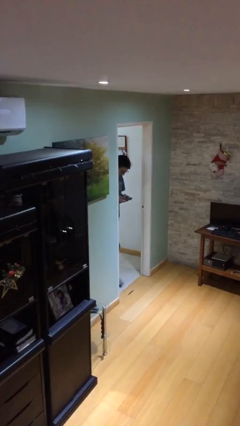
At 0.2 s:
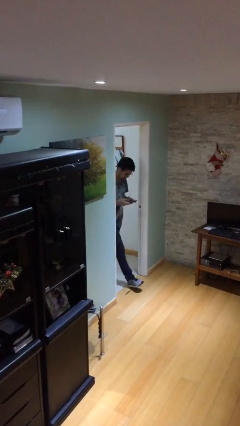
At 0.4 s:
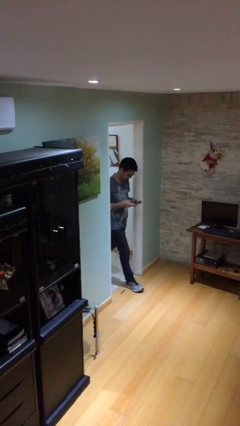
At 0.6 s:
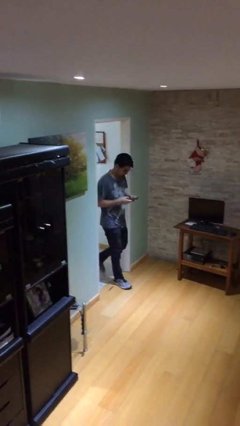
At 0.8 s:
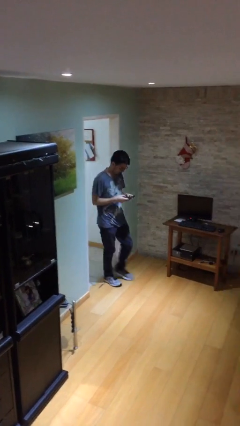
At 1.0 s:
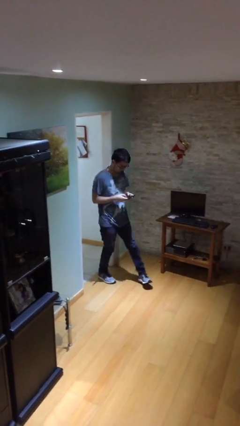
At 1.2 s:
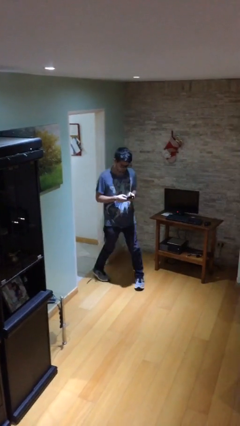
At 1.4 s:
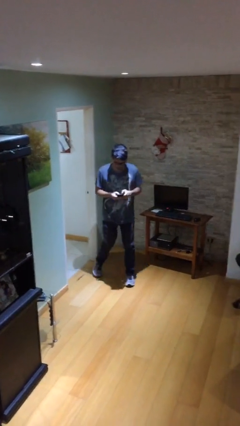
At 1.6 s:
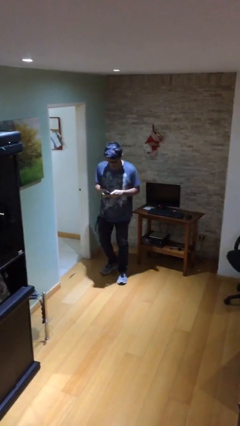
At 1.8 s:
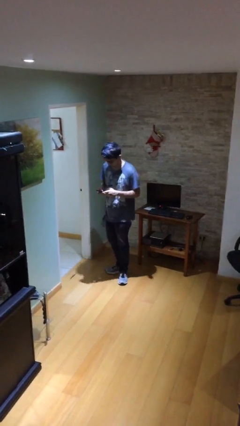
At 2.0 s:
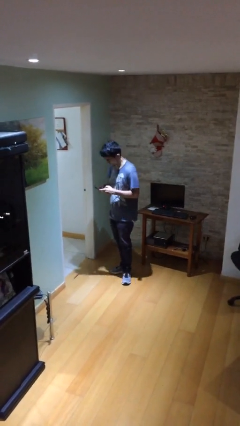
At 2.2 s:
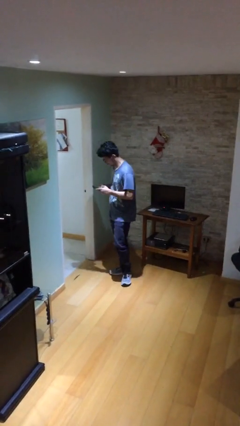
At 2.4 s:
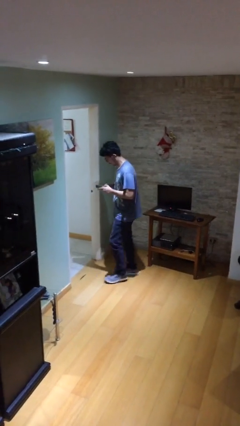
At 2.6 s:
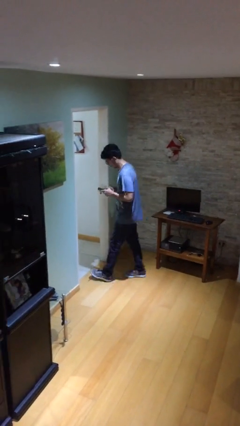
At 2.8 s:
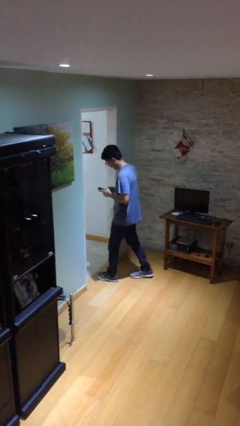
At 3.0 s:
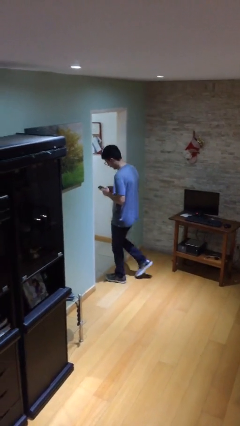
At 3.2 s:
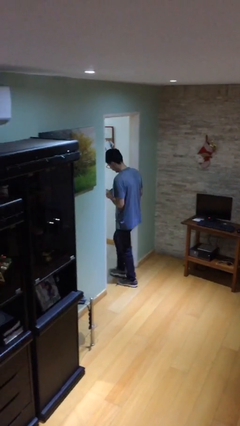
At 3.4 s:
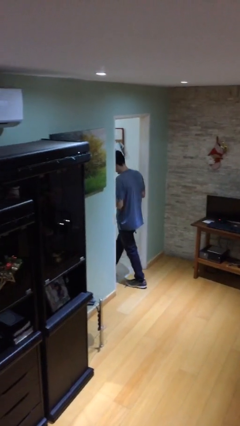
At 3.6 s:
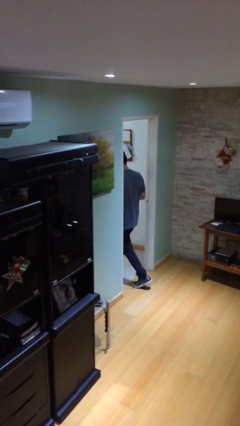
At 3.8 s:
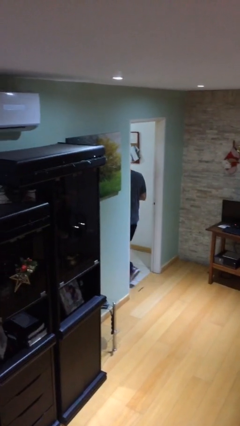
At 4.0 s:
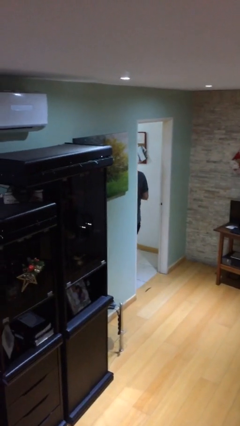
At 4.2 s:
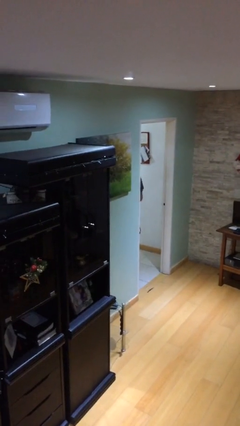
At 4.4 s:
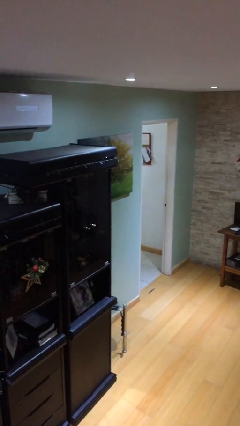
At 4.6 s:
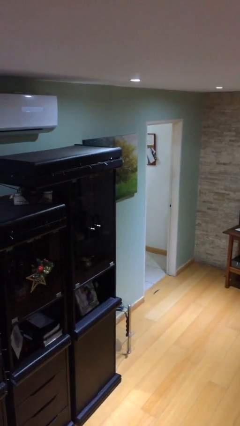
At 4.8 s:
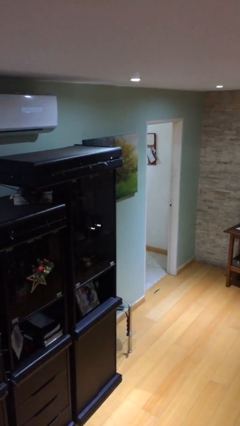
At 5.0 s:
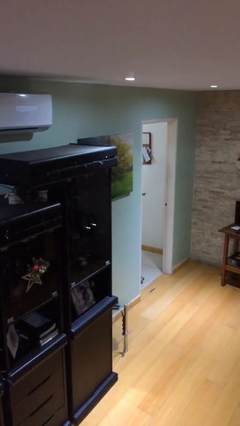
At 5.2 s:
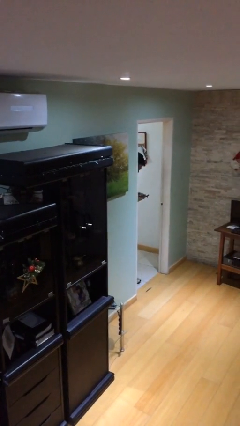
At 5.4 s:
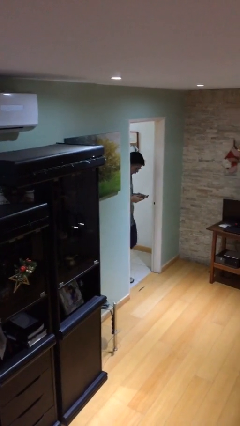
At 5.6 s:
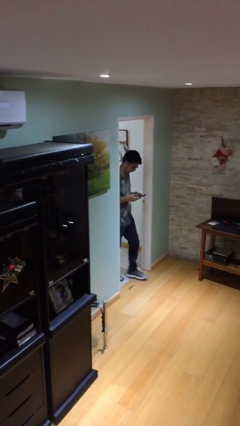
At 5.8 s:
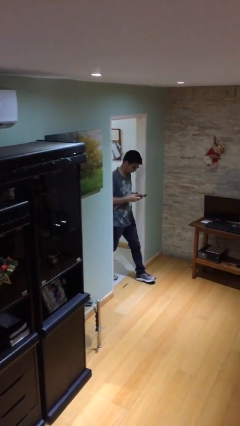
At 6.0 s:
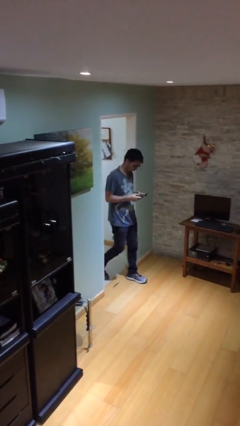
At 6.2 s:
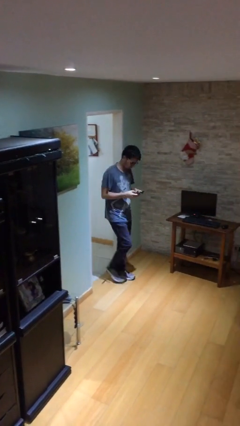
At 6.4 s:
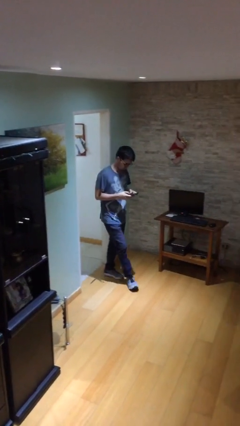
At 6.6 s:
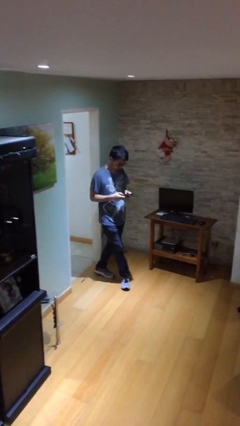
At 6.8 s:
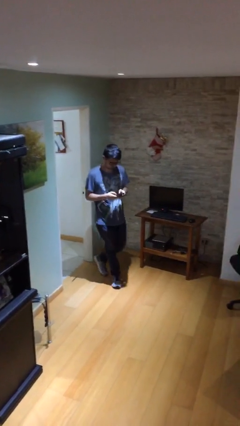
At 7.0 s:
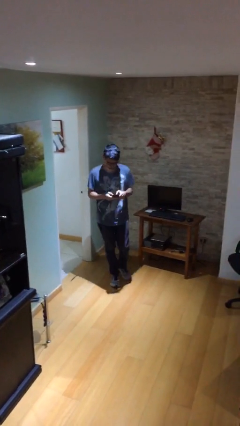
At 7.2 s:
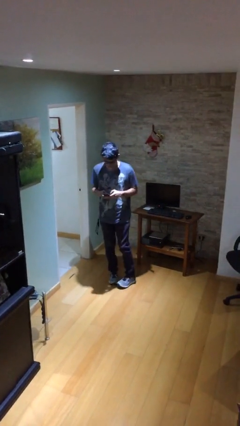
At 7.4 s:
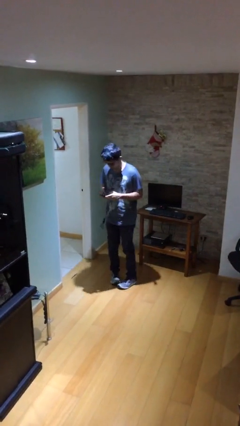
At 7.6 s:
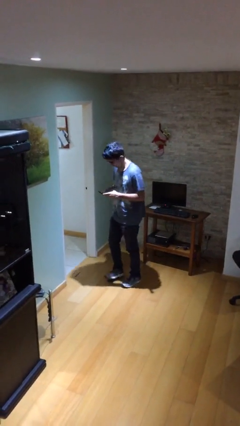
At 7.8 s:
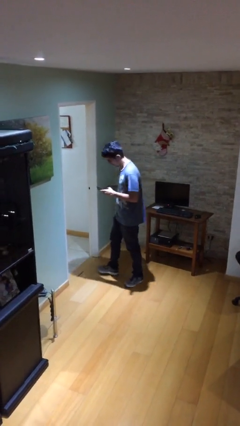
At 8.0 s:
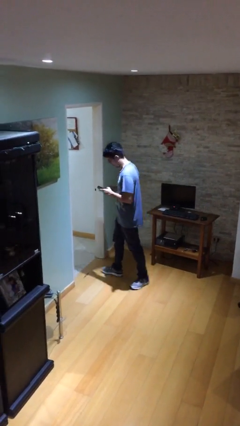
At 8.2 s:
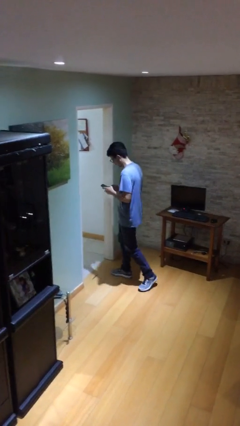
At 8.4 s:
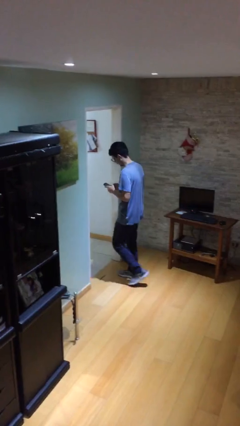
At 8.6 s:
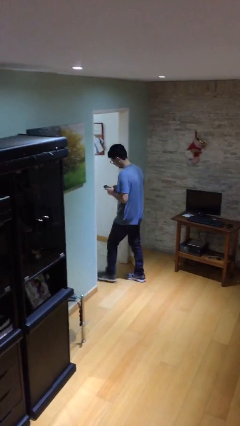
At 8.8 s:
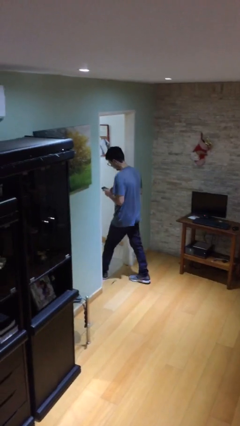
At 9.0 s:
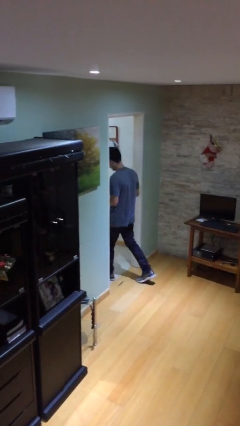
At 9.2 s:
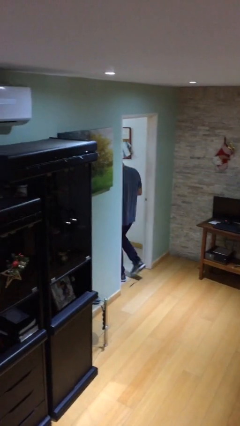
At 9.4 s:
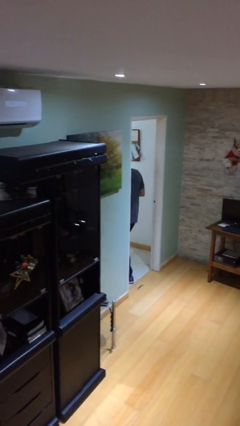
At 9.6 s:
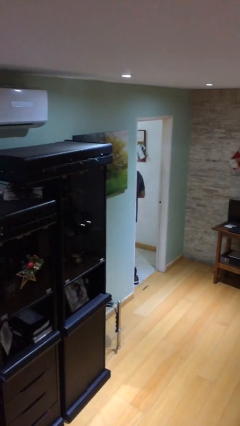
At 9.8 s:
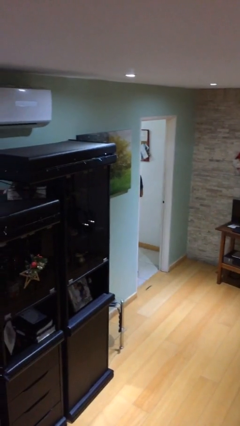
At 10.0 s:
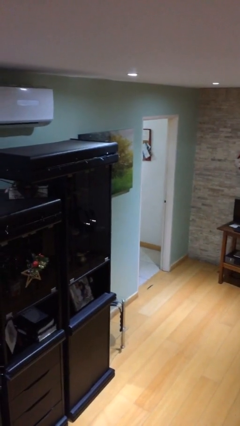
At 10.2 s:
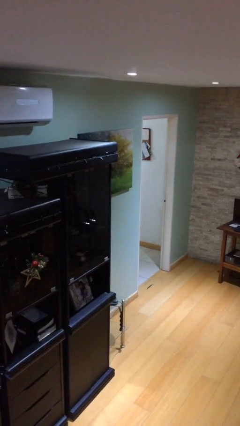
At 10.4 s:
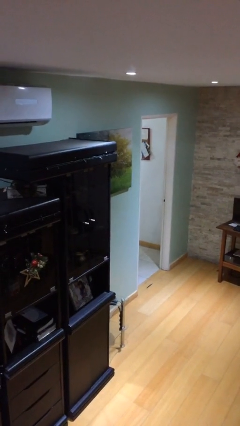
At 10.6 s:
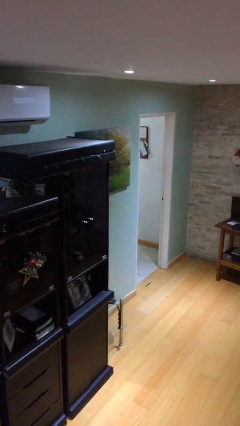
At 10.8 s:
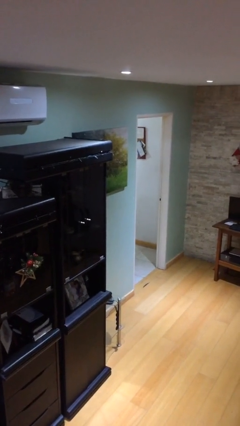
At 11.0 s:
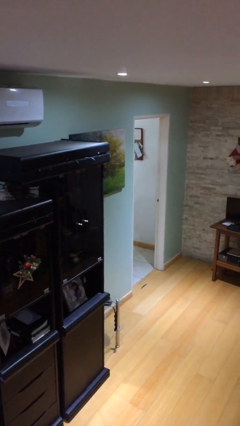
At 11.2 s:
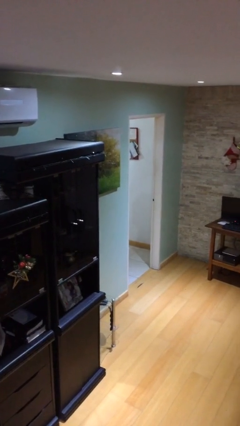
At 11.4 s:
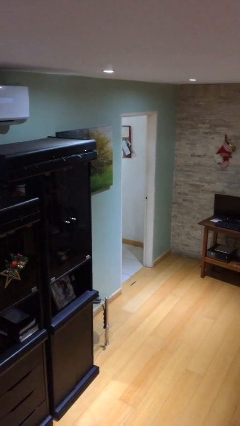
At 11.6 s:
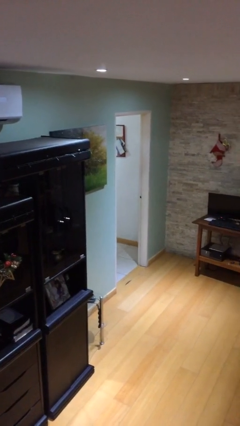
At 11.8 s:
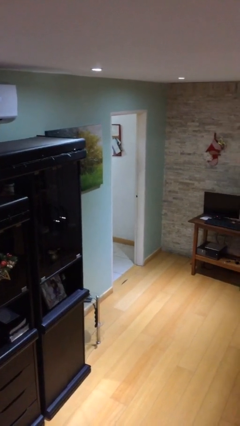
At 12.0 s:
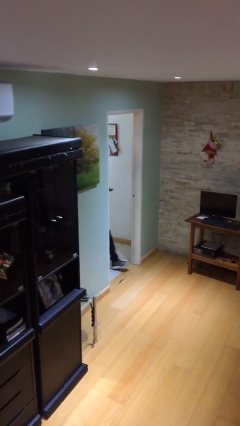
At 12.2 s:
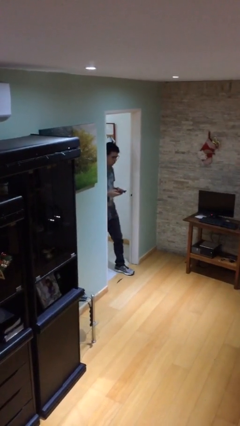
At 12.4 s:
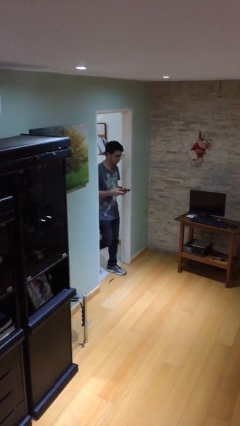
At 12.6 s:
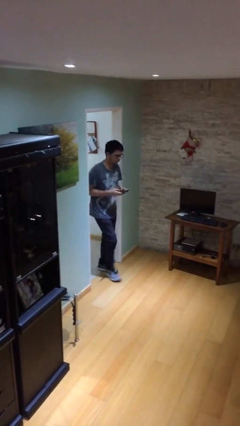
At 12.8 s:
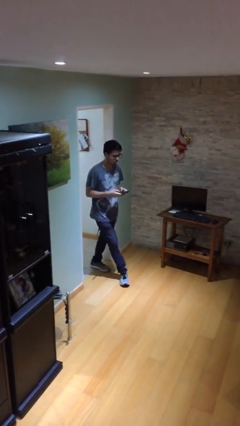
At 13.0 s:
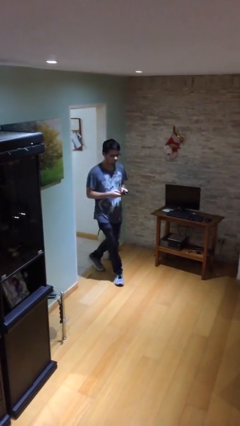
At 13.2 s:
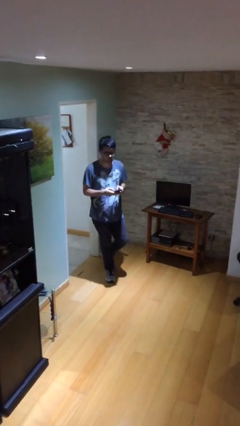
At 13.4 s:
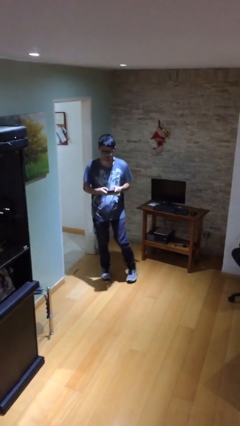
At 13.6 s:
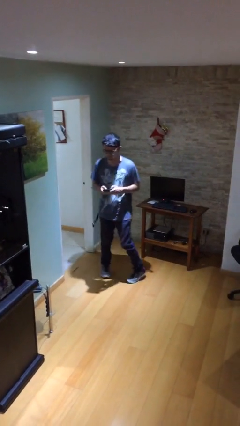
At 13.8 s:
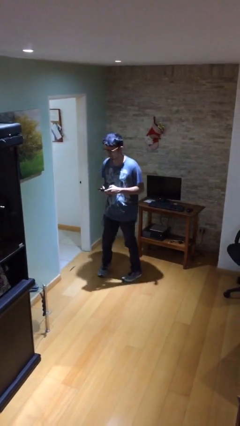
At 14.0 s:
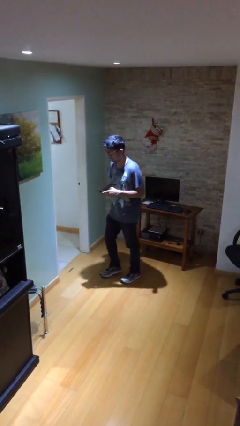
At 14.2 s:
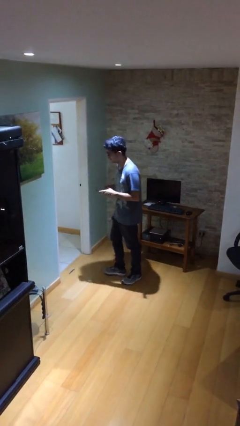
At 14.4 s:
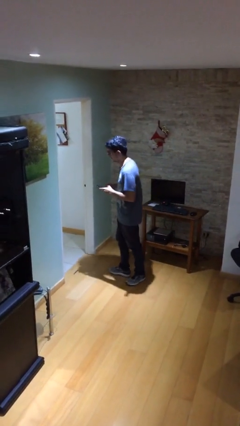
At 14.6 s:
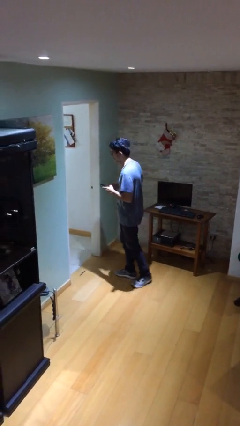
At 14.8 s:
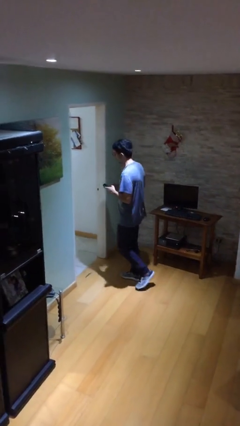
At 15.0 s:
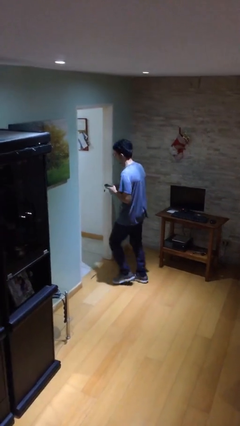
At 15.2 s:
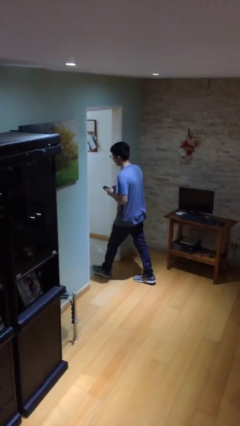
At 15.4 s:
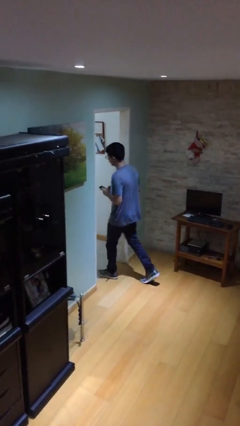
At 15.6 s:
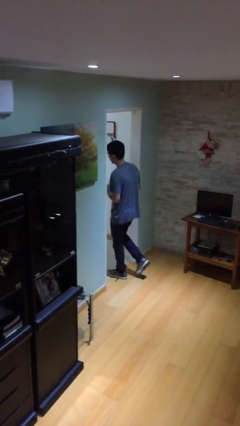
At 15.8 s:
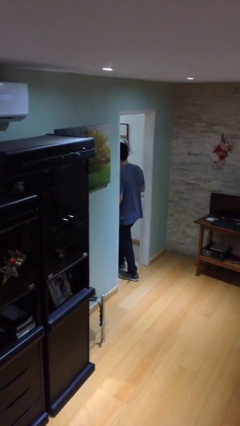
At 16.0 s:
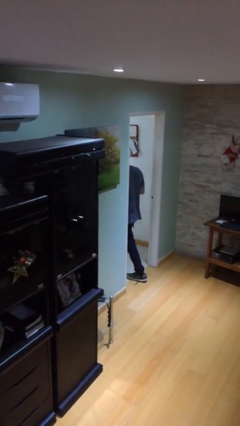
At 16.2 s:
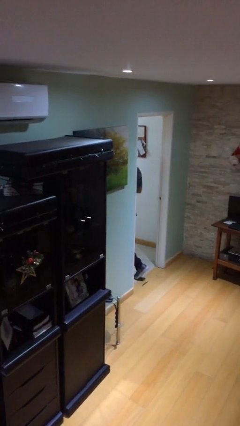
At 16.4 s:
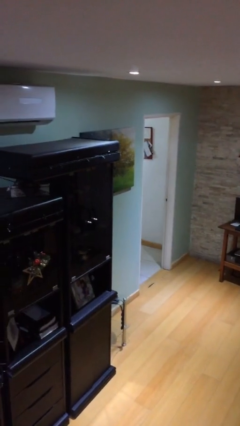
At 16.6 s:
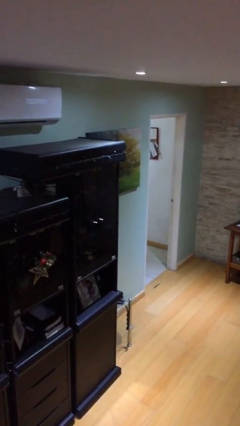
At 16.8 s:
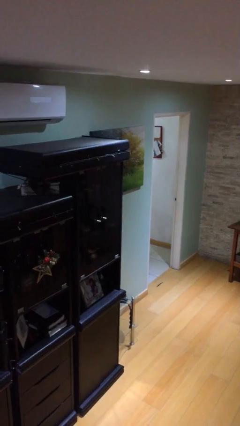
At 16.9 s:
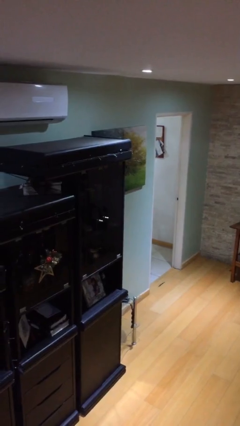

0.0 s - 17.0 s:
person texts on phone

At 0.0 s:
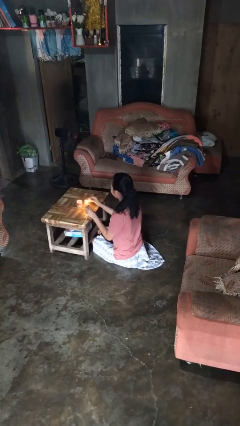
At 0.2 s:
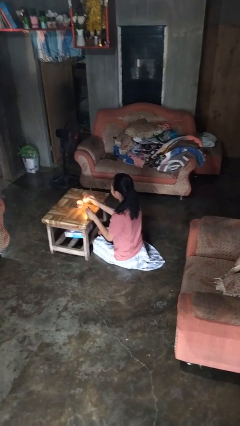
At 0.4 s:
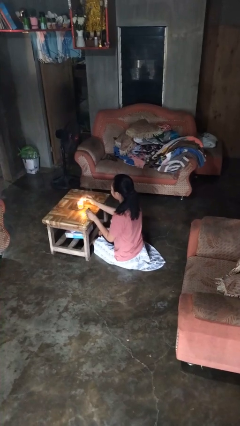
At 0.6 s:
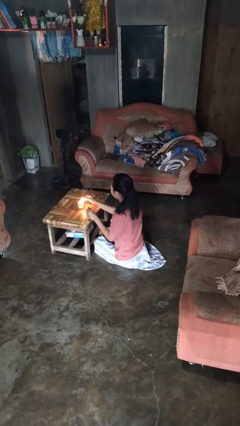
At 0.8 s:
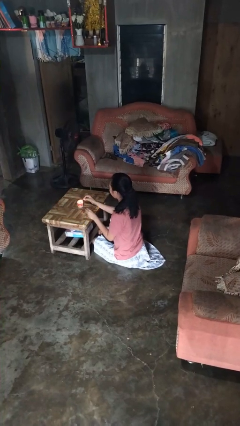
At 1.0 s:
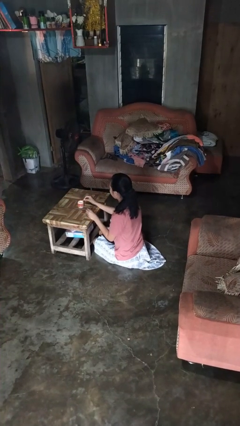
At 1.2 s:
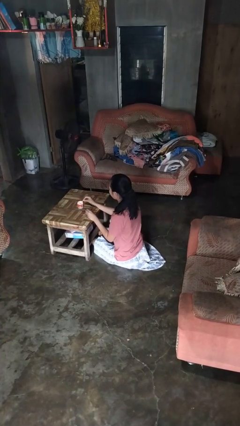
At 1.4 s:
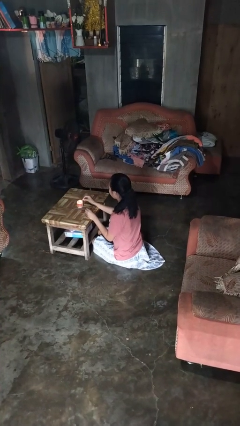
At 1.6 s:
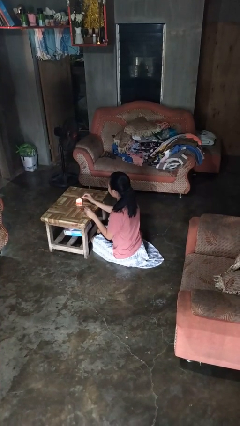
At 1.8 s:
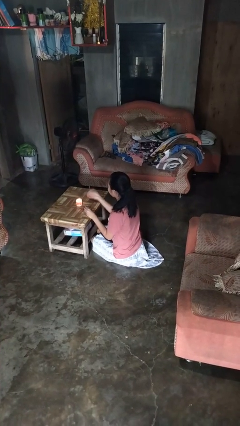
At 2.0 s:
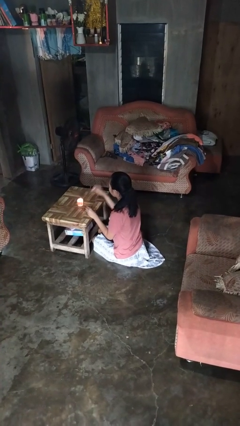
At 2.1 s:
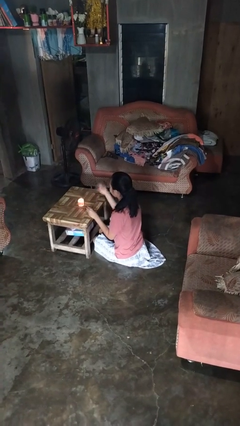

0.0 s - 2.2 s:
person lights candle
